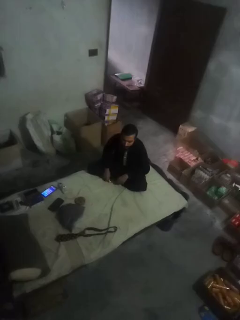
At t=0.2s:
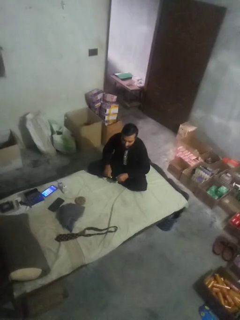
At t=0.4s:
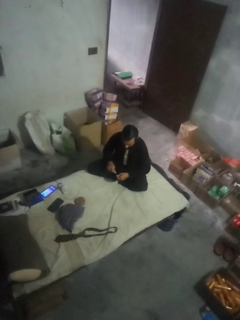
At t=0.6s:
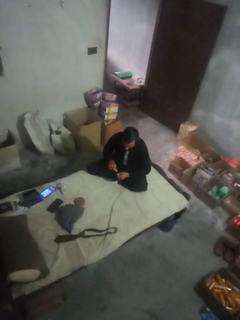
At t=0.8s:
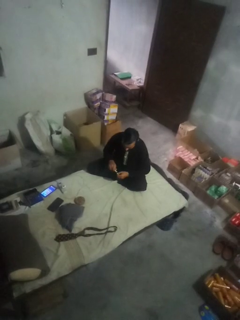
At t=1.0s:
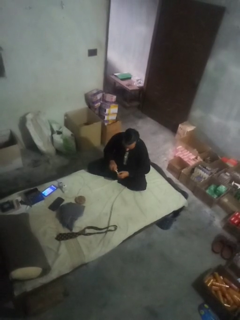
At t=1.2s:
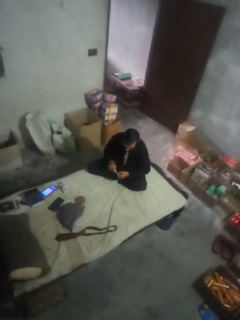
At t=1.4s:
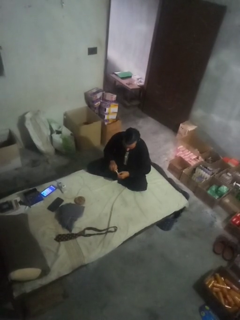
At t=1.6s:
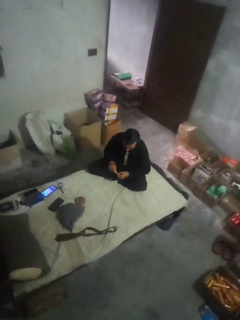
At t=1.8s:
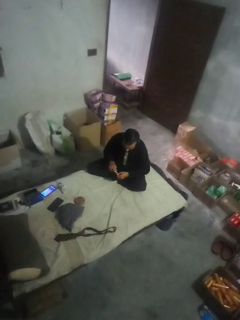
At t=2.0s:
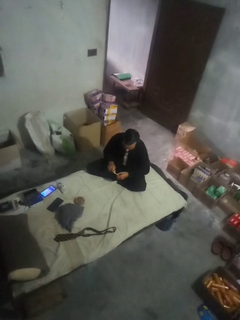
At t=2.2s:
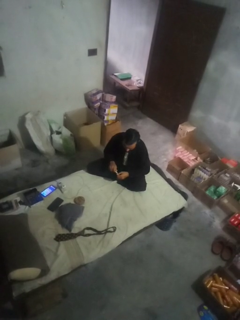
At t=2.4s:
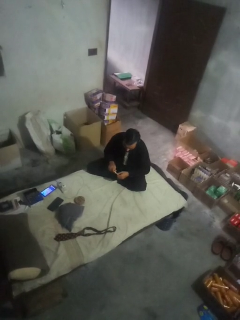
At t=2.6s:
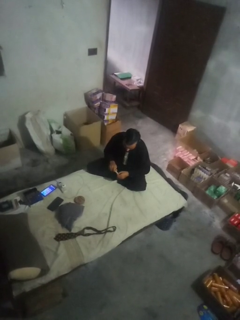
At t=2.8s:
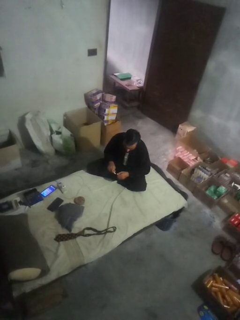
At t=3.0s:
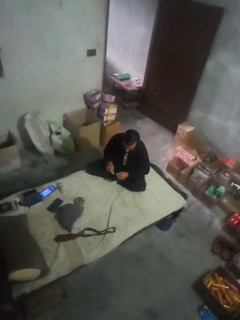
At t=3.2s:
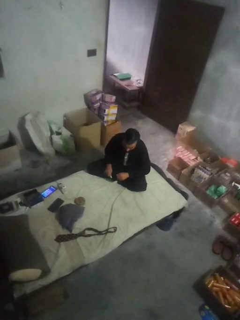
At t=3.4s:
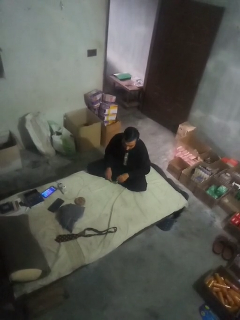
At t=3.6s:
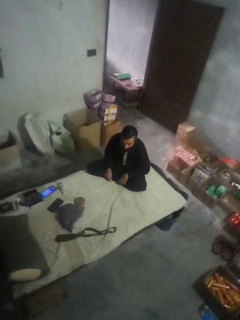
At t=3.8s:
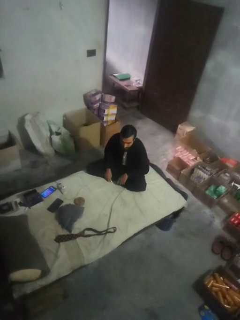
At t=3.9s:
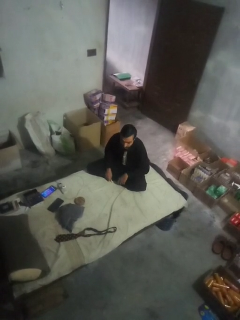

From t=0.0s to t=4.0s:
person paints fingernails

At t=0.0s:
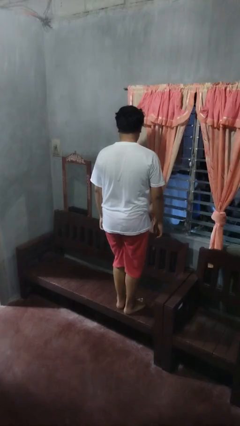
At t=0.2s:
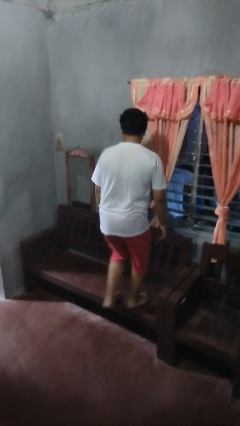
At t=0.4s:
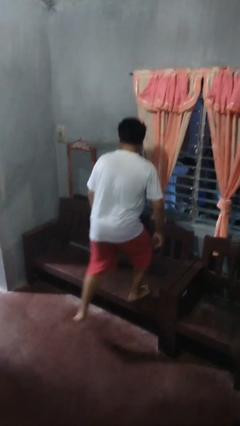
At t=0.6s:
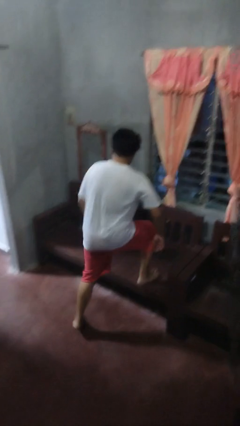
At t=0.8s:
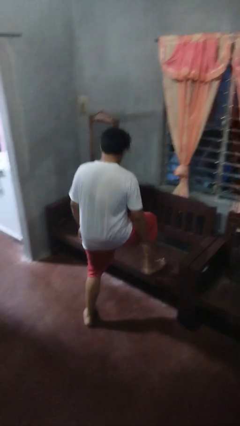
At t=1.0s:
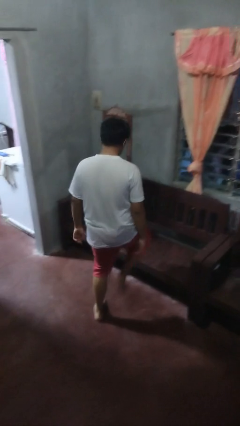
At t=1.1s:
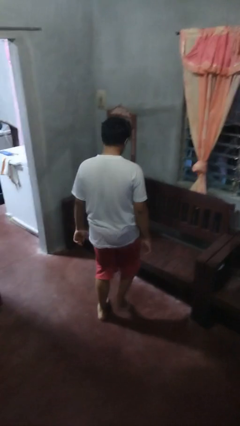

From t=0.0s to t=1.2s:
person climbs off couch

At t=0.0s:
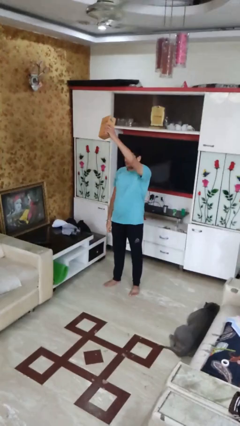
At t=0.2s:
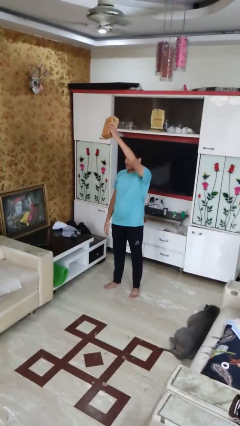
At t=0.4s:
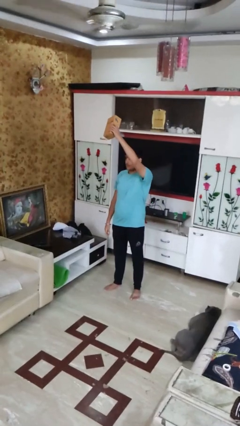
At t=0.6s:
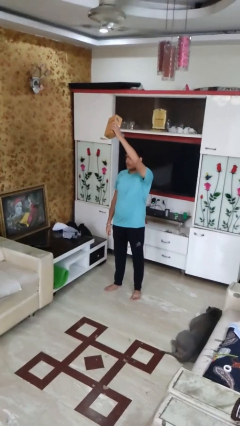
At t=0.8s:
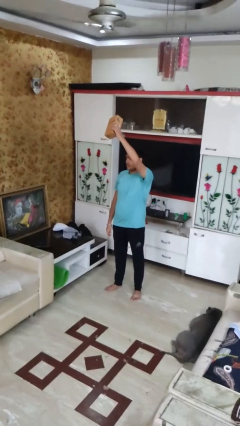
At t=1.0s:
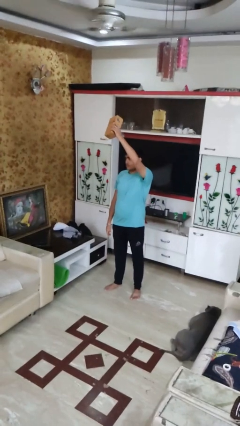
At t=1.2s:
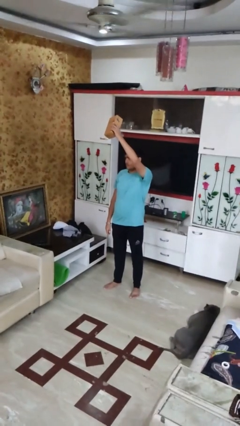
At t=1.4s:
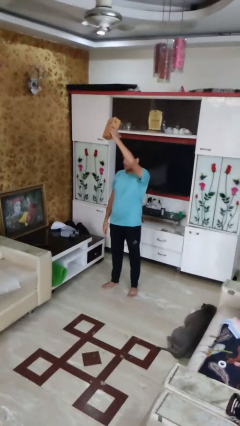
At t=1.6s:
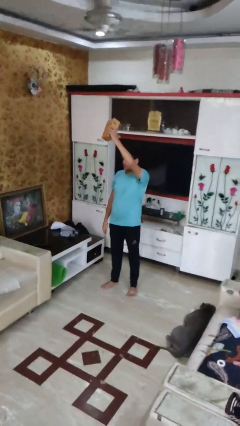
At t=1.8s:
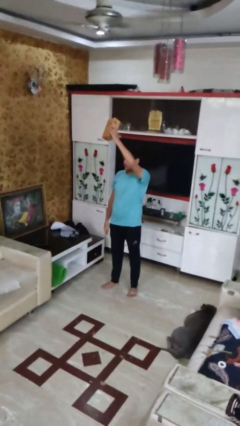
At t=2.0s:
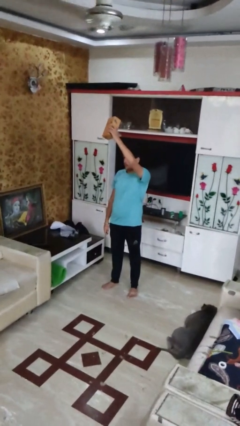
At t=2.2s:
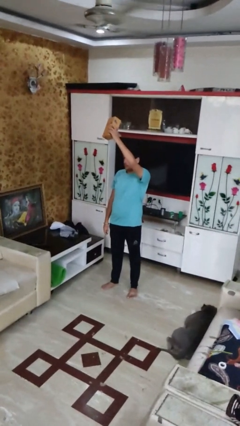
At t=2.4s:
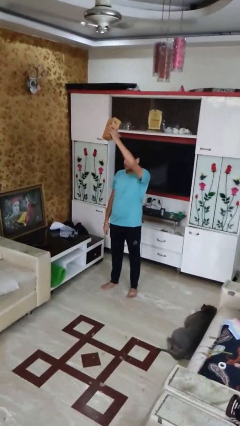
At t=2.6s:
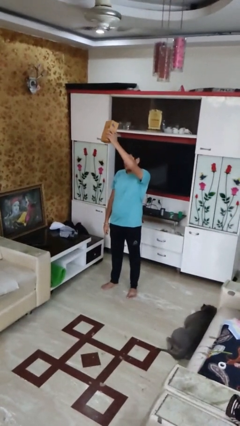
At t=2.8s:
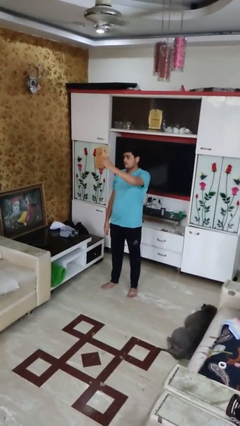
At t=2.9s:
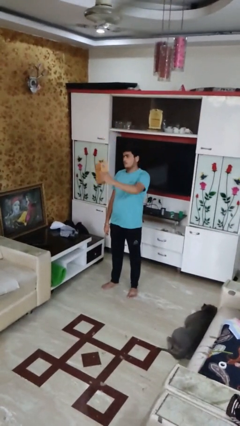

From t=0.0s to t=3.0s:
person holds object above head

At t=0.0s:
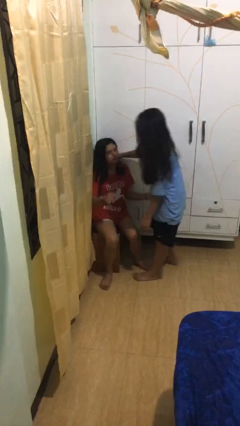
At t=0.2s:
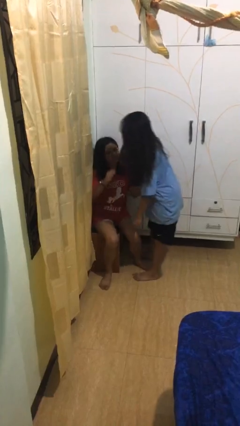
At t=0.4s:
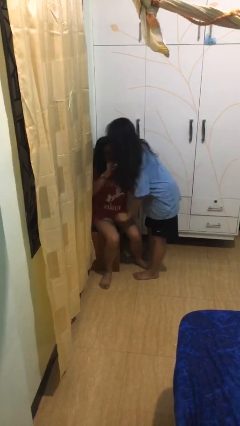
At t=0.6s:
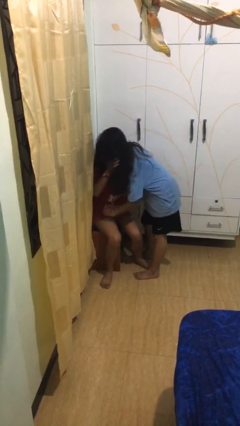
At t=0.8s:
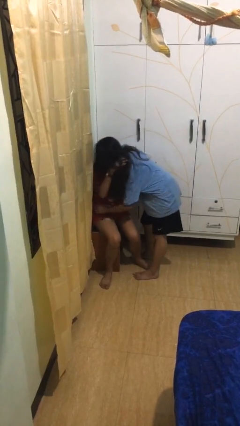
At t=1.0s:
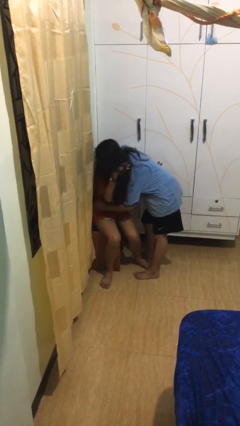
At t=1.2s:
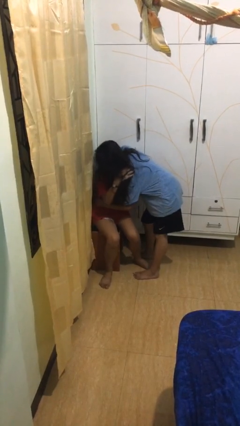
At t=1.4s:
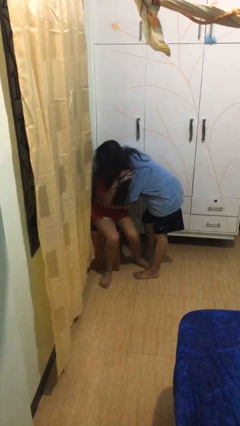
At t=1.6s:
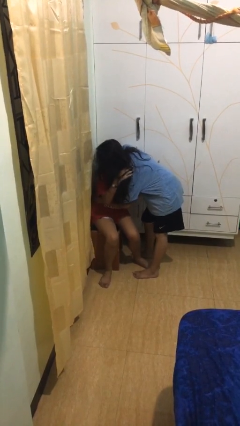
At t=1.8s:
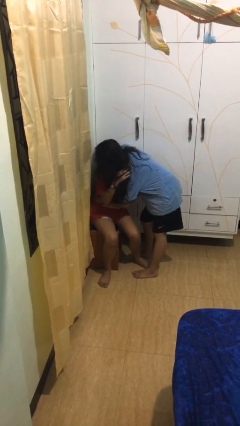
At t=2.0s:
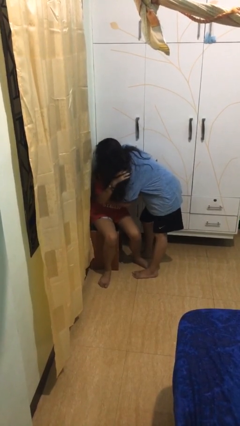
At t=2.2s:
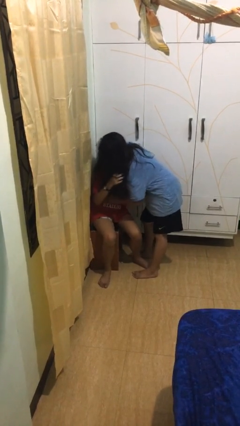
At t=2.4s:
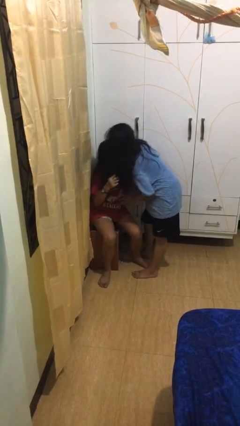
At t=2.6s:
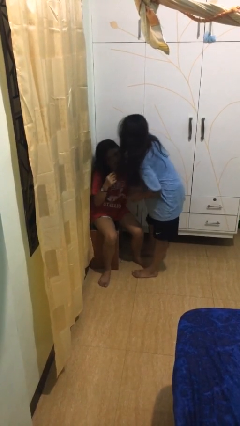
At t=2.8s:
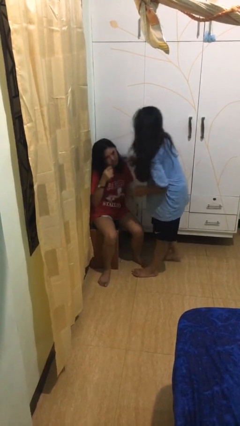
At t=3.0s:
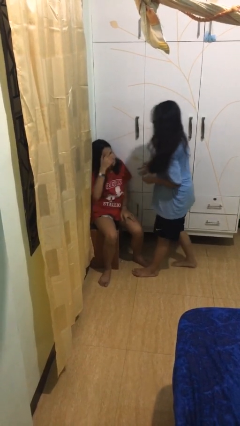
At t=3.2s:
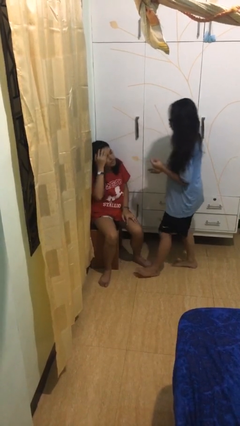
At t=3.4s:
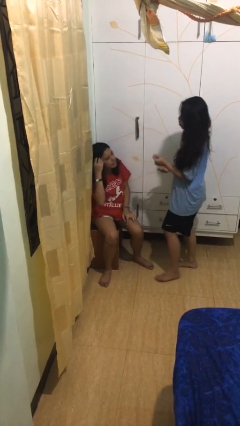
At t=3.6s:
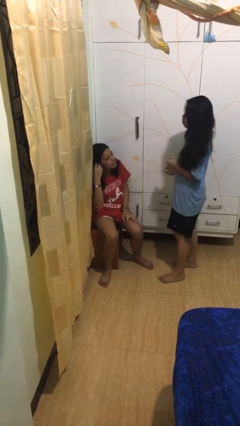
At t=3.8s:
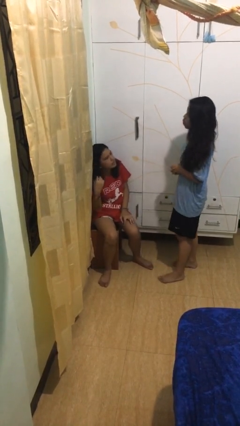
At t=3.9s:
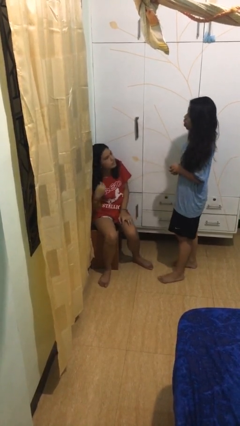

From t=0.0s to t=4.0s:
person embraces person

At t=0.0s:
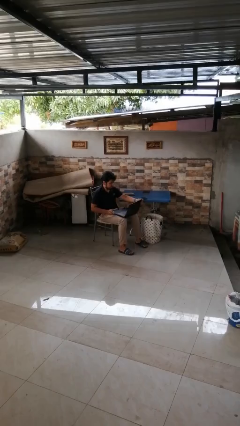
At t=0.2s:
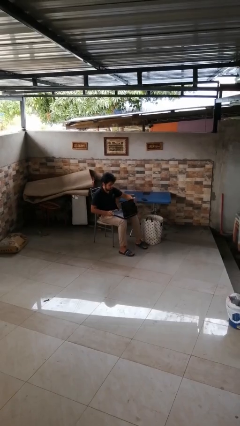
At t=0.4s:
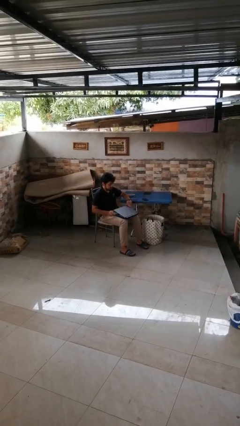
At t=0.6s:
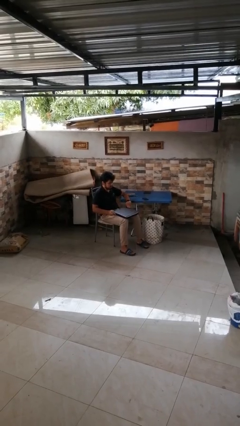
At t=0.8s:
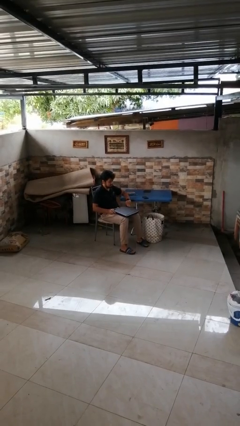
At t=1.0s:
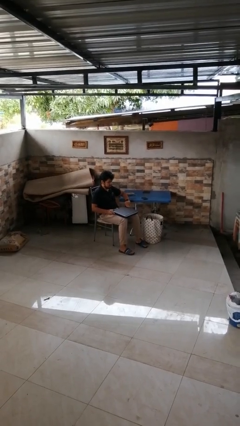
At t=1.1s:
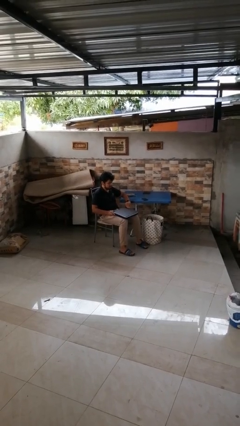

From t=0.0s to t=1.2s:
person closes laptop

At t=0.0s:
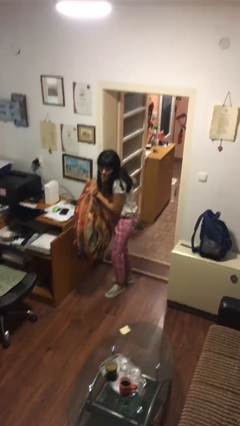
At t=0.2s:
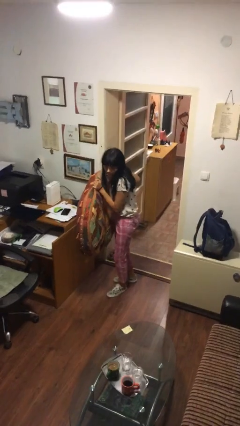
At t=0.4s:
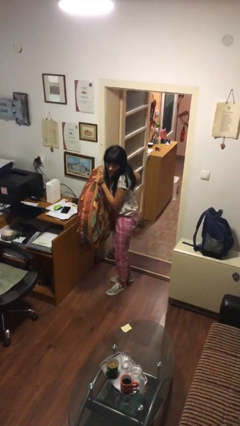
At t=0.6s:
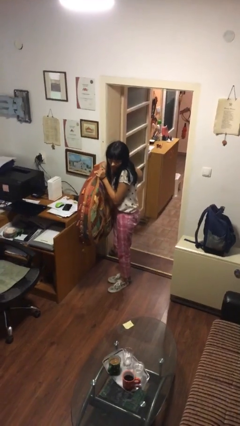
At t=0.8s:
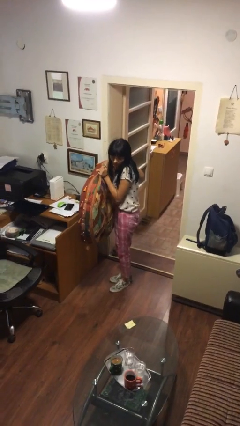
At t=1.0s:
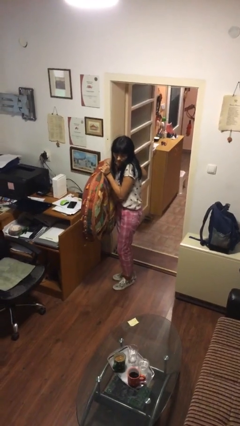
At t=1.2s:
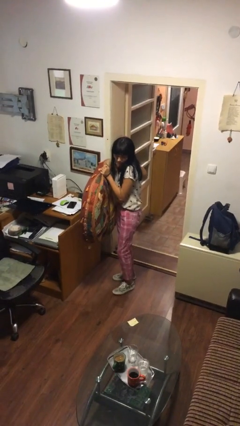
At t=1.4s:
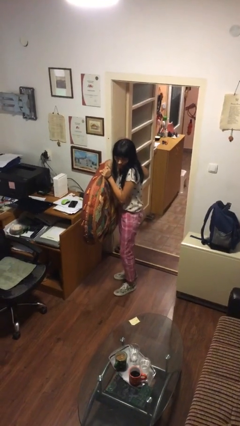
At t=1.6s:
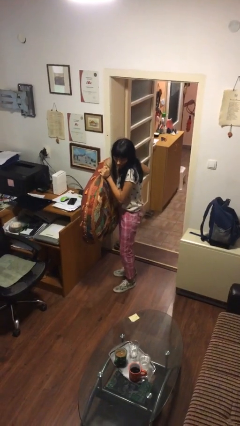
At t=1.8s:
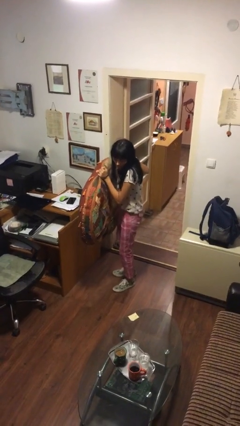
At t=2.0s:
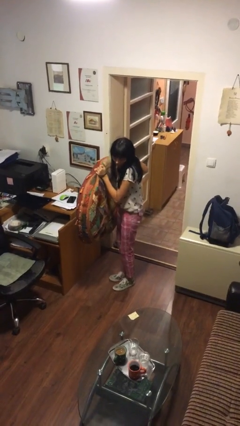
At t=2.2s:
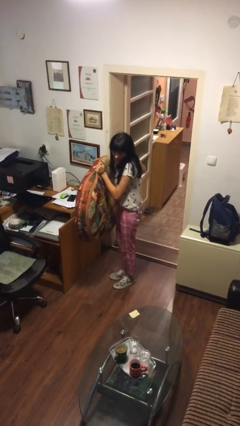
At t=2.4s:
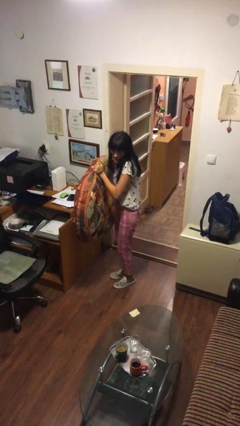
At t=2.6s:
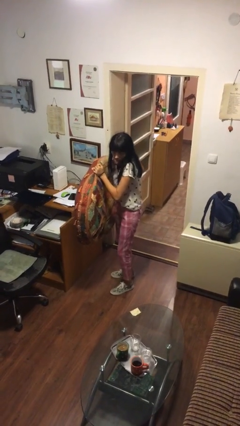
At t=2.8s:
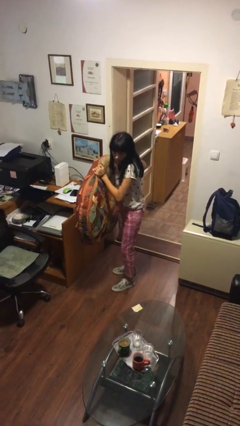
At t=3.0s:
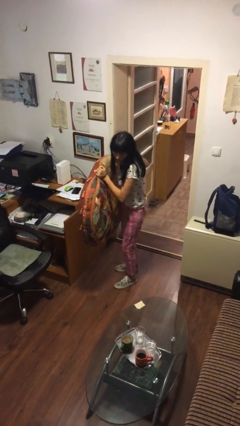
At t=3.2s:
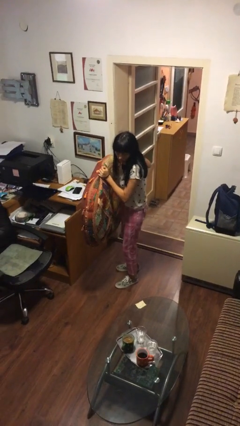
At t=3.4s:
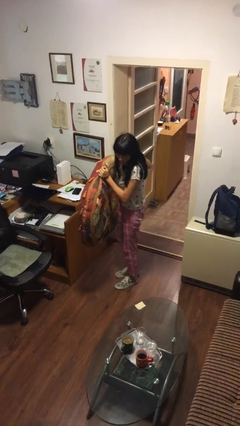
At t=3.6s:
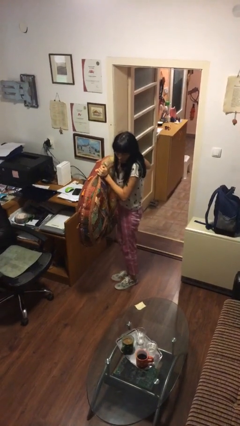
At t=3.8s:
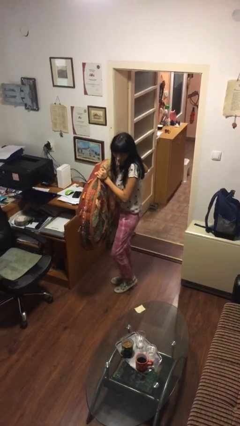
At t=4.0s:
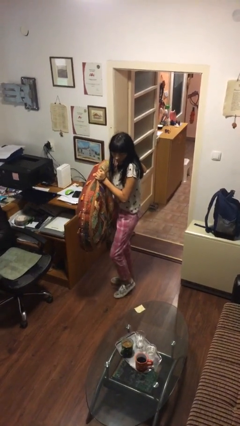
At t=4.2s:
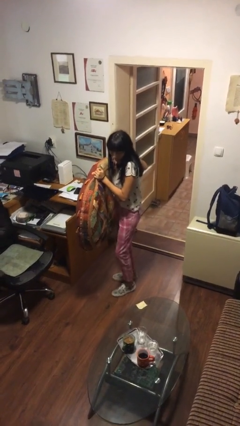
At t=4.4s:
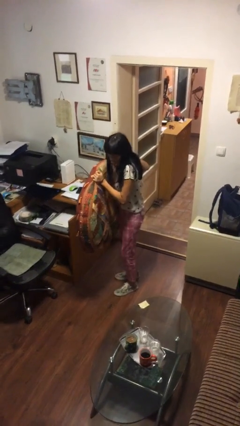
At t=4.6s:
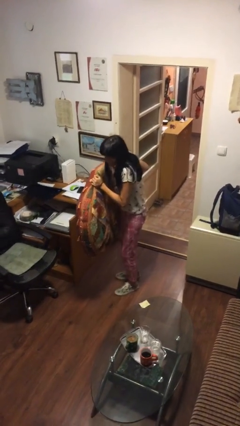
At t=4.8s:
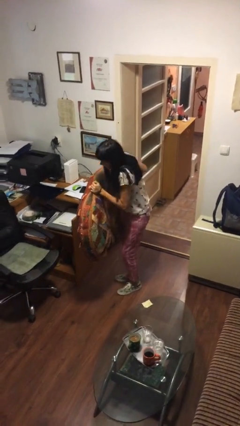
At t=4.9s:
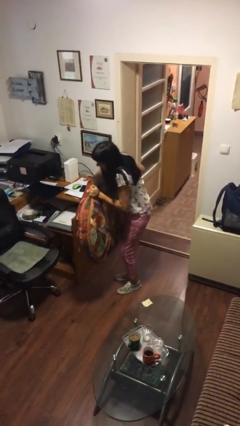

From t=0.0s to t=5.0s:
person carries heavy object
